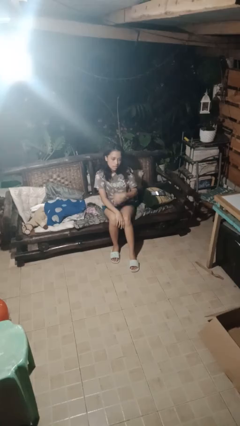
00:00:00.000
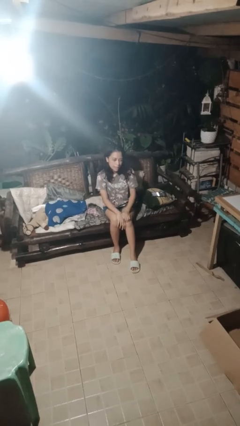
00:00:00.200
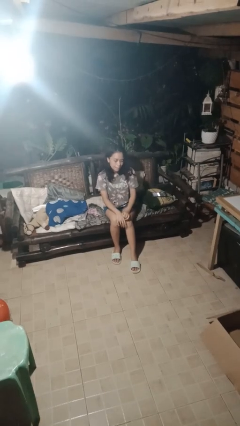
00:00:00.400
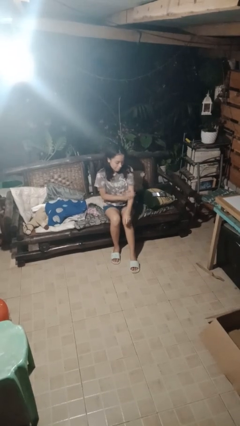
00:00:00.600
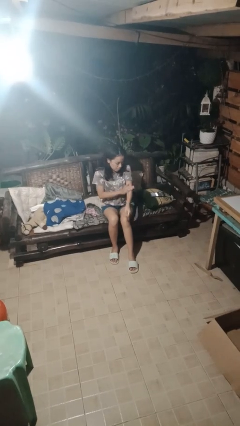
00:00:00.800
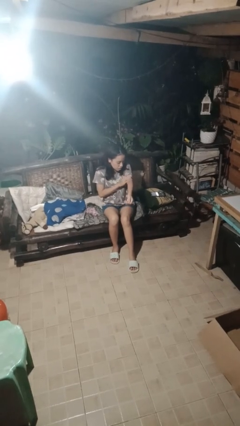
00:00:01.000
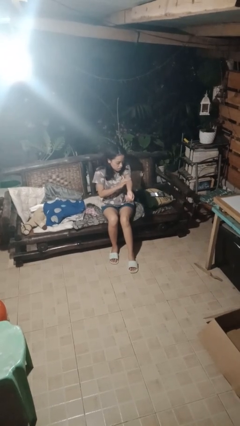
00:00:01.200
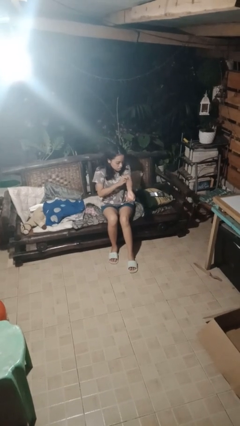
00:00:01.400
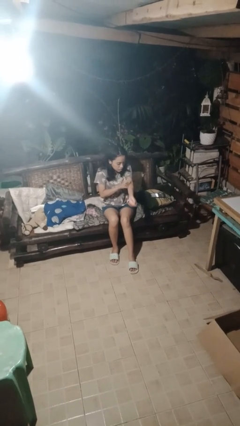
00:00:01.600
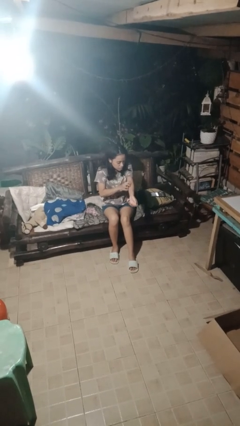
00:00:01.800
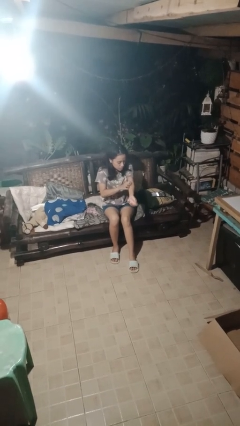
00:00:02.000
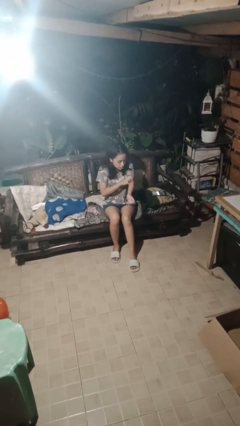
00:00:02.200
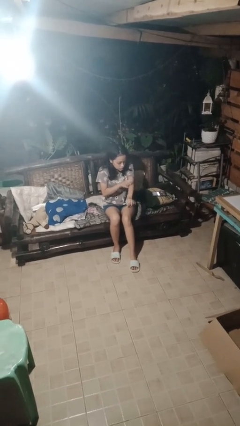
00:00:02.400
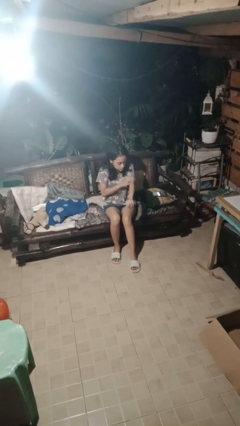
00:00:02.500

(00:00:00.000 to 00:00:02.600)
person swats bug

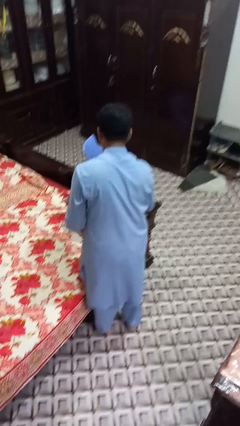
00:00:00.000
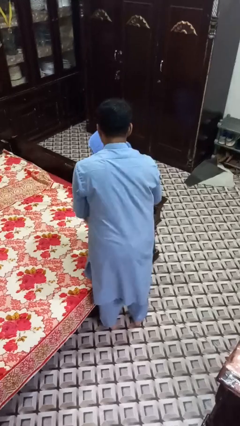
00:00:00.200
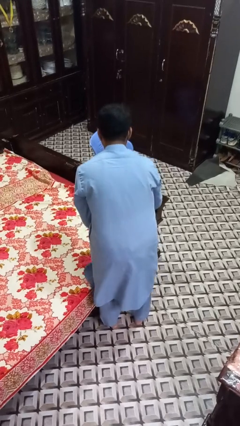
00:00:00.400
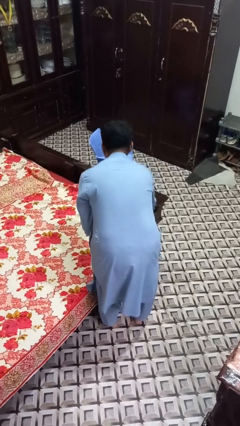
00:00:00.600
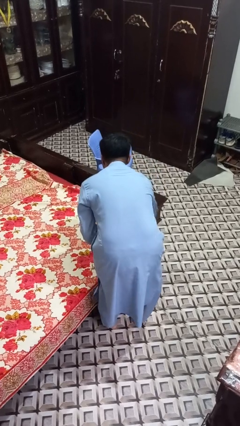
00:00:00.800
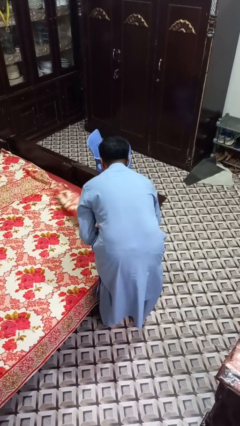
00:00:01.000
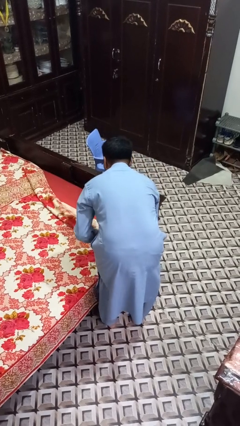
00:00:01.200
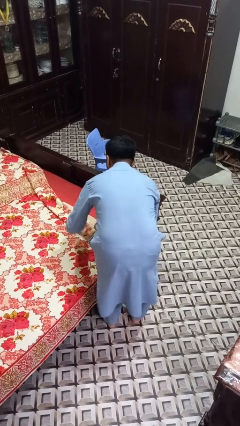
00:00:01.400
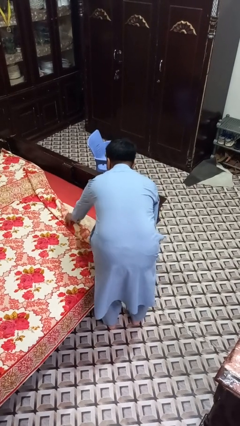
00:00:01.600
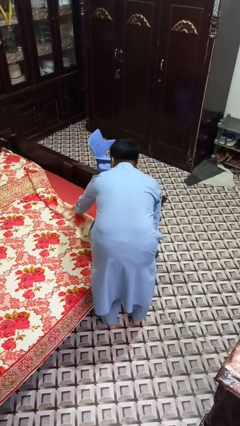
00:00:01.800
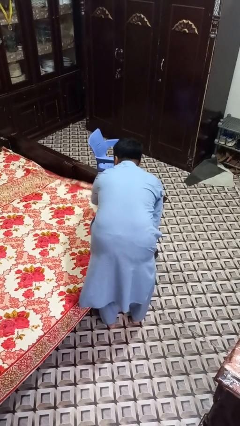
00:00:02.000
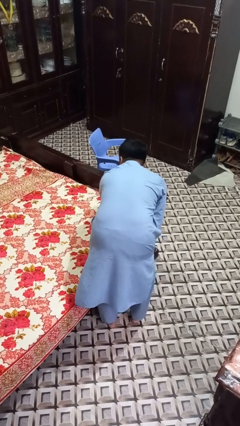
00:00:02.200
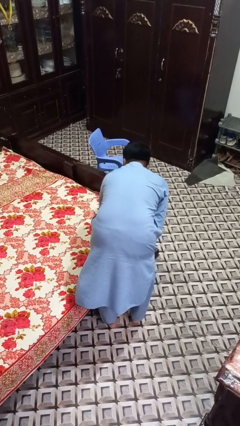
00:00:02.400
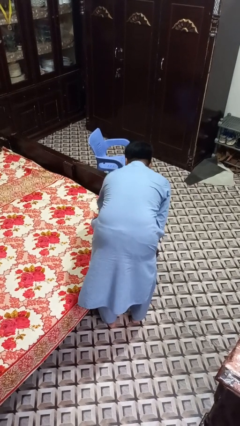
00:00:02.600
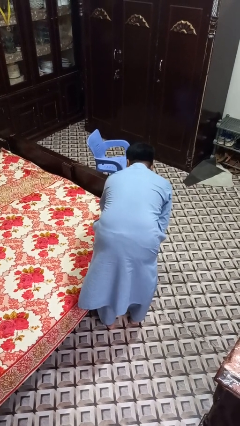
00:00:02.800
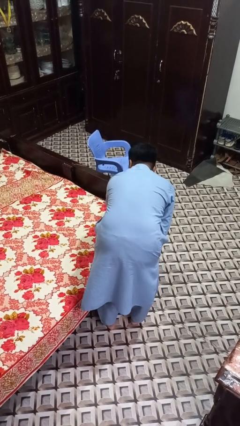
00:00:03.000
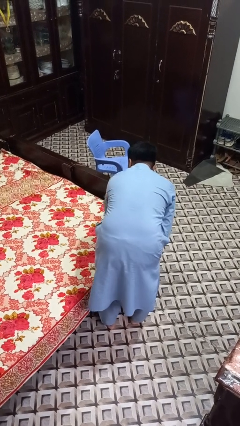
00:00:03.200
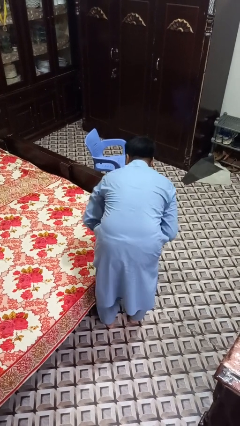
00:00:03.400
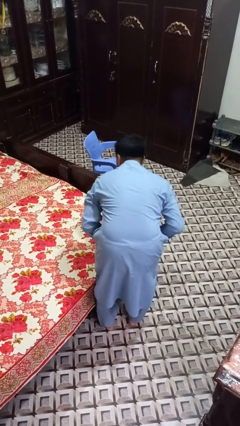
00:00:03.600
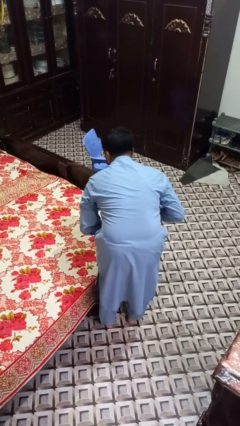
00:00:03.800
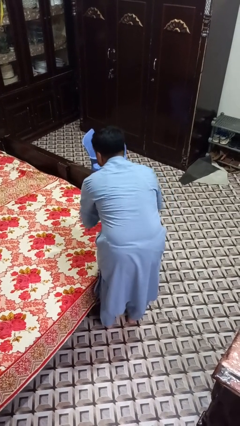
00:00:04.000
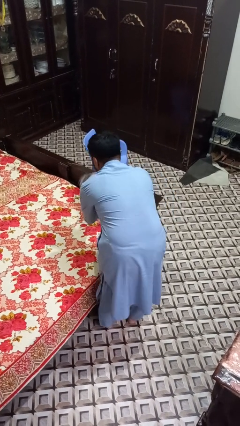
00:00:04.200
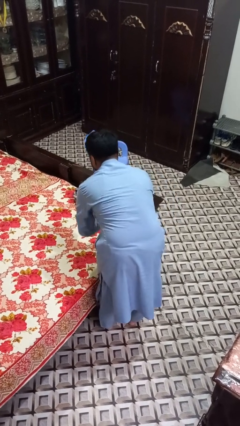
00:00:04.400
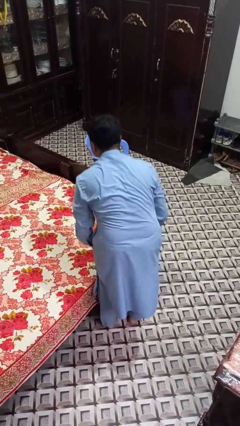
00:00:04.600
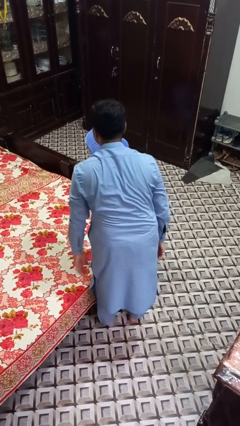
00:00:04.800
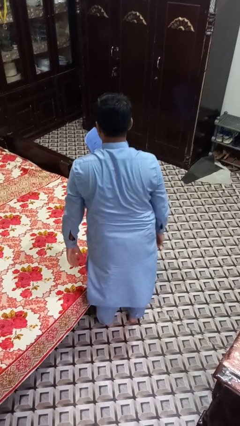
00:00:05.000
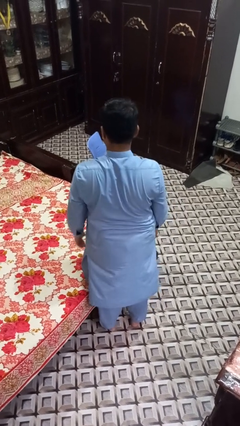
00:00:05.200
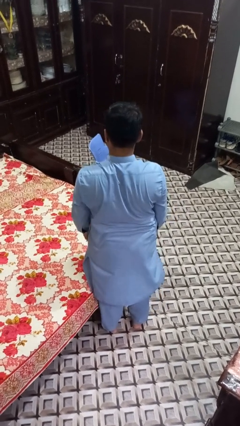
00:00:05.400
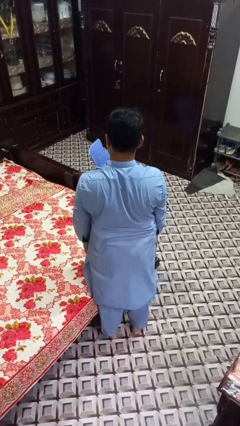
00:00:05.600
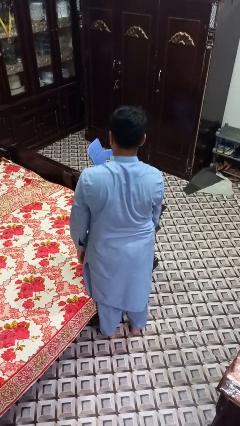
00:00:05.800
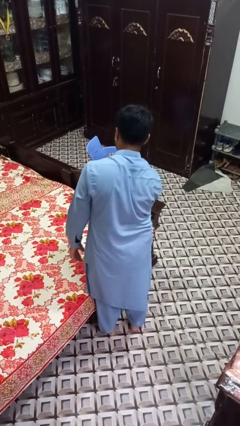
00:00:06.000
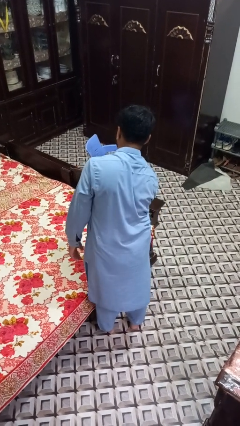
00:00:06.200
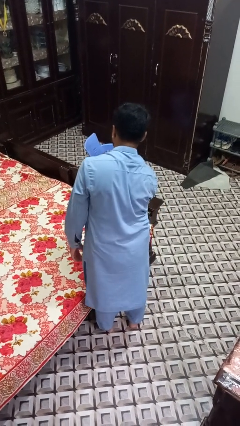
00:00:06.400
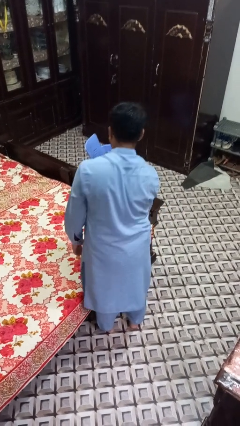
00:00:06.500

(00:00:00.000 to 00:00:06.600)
person makes bed

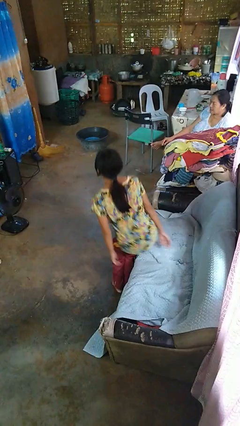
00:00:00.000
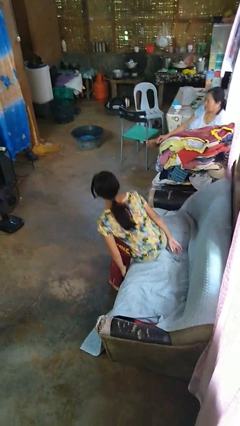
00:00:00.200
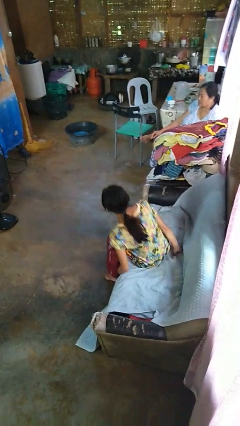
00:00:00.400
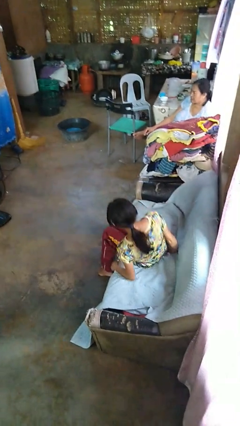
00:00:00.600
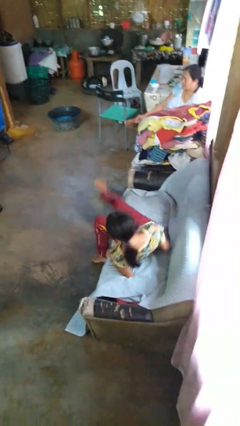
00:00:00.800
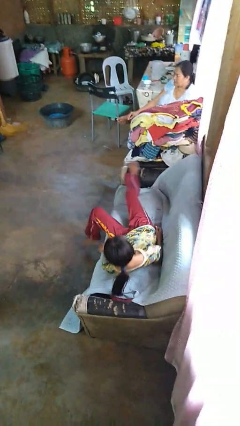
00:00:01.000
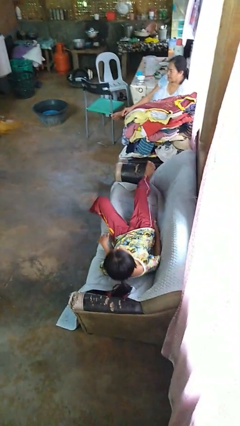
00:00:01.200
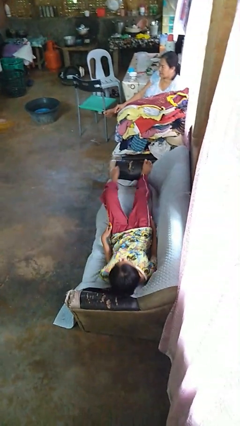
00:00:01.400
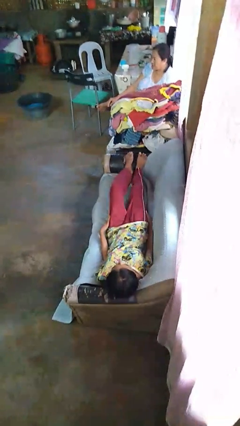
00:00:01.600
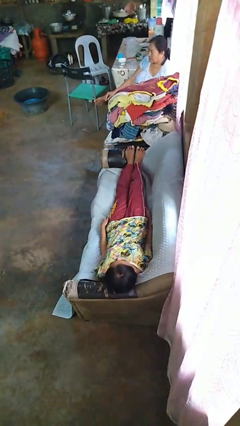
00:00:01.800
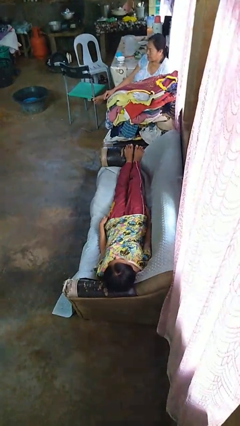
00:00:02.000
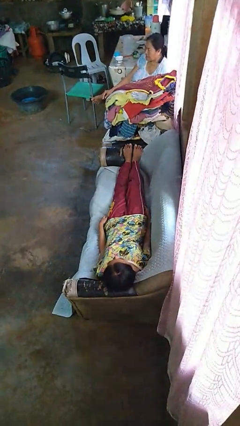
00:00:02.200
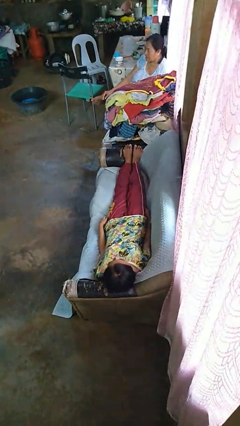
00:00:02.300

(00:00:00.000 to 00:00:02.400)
person lies down on couch

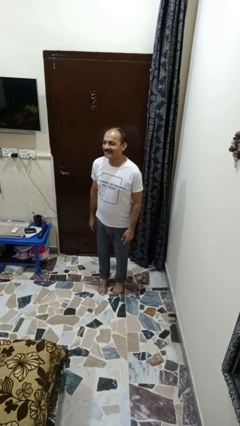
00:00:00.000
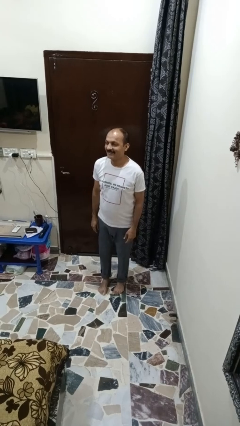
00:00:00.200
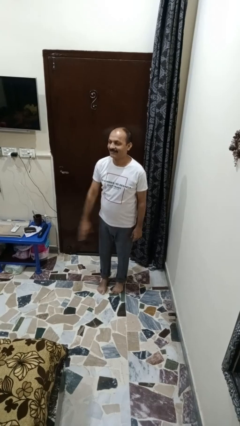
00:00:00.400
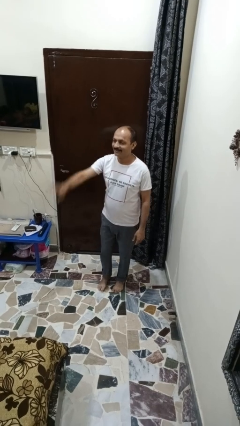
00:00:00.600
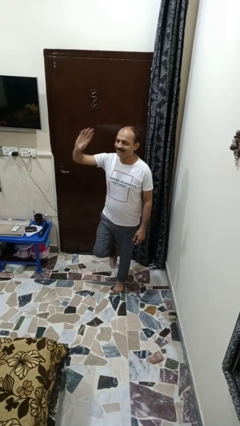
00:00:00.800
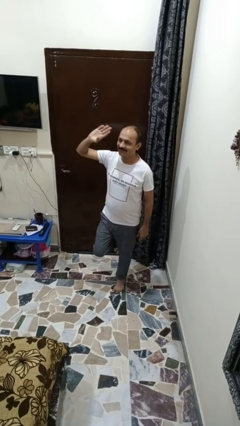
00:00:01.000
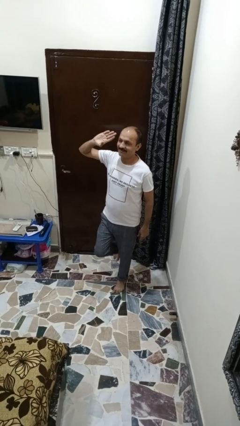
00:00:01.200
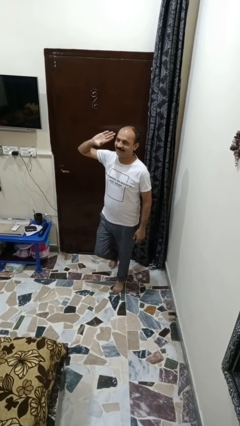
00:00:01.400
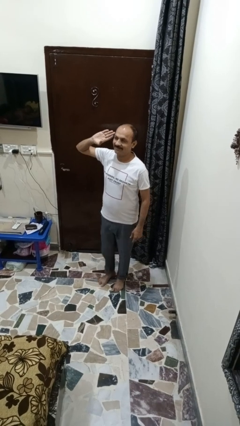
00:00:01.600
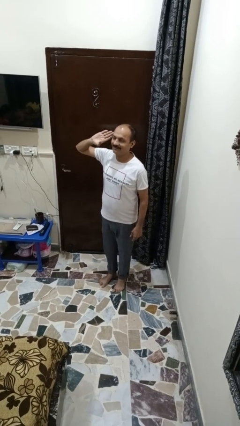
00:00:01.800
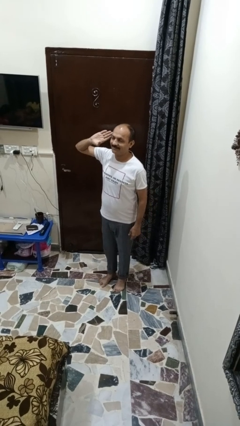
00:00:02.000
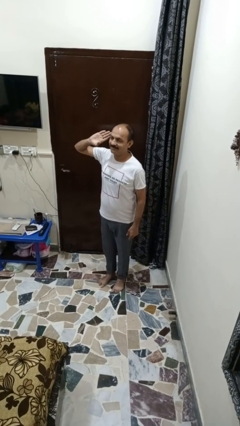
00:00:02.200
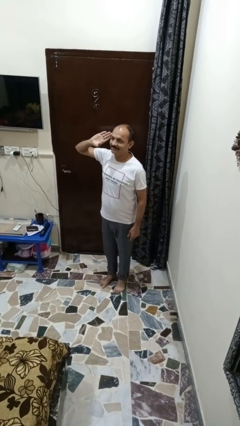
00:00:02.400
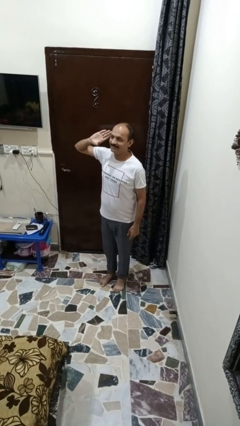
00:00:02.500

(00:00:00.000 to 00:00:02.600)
person salutes

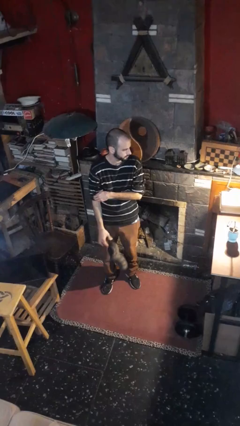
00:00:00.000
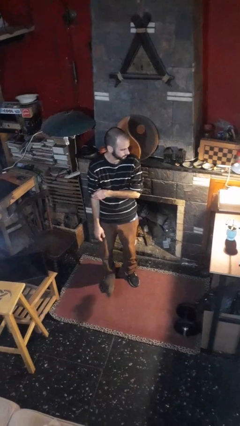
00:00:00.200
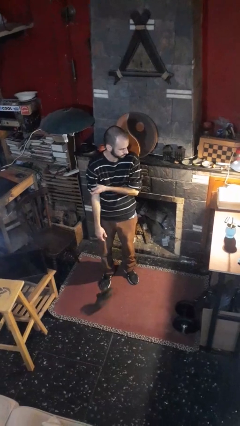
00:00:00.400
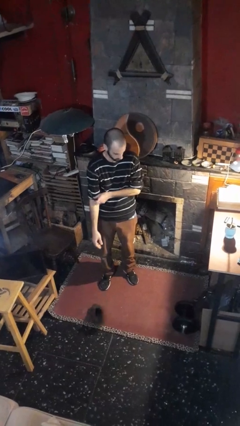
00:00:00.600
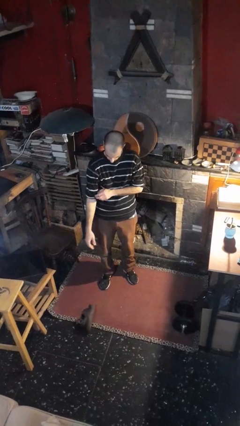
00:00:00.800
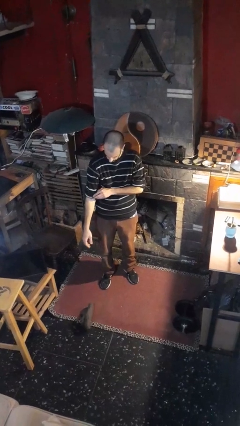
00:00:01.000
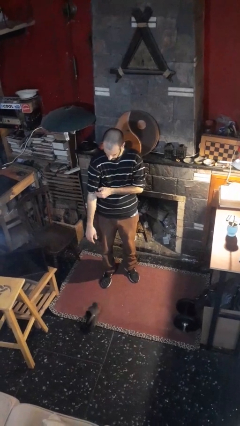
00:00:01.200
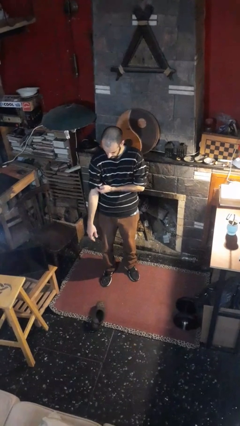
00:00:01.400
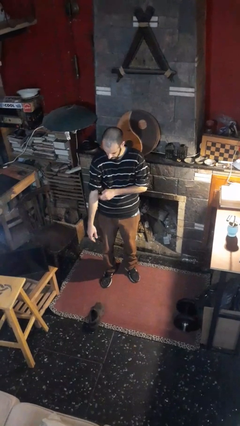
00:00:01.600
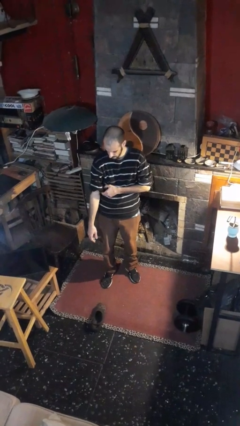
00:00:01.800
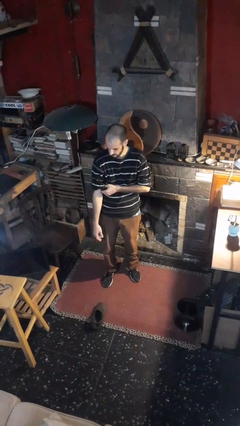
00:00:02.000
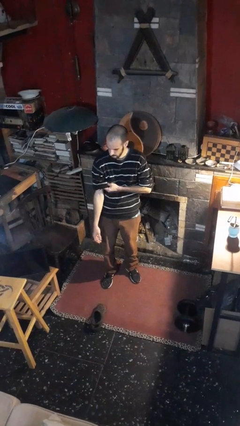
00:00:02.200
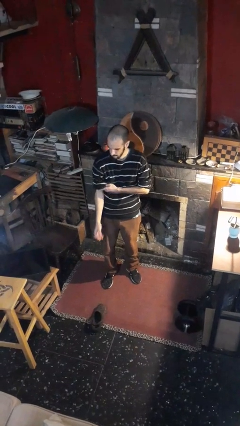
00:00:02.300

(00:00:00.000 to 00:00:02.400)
person drops object

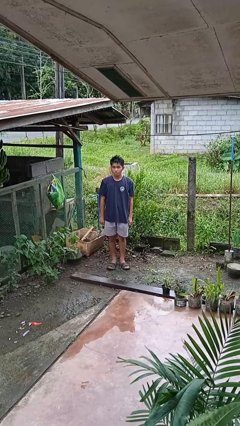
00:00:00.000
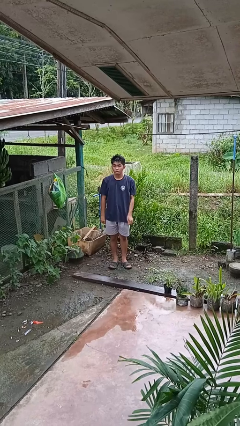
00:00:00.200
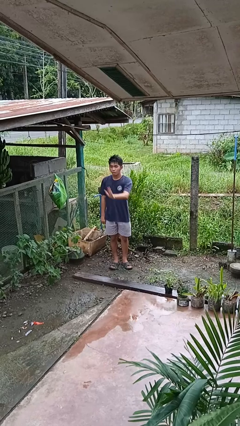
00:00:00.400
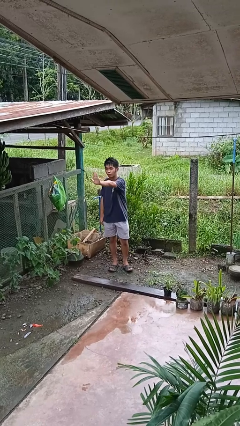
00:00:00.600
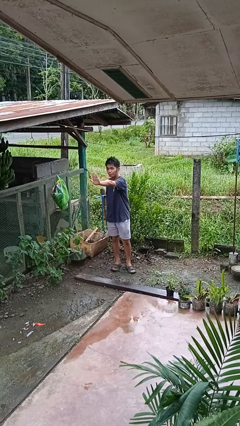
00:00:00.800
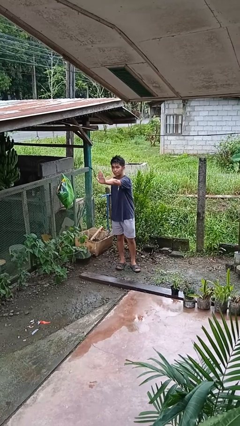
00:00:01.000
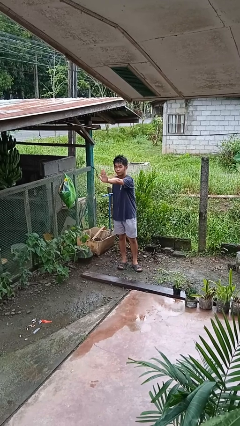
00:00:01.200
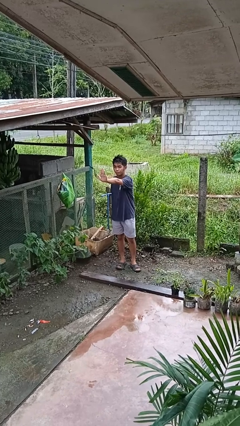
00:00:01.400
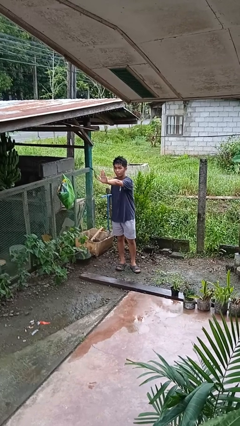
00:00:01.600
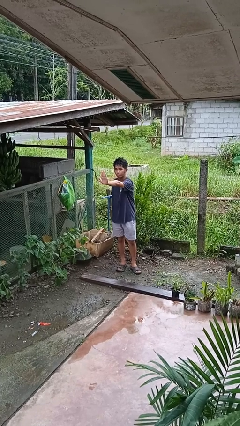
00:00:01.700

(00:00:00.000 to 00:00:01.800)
person gestures stop
